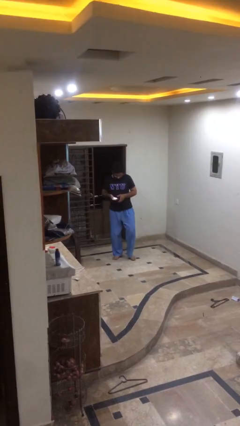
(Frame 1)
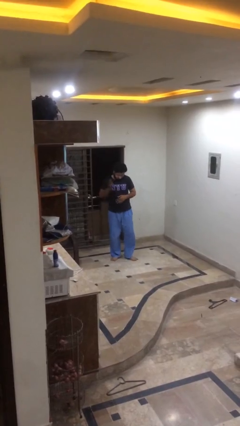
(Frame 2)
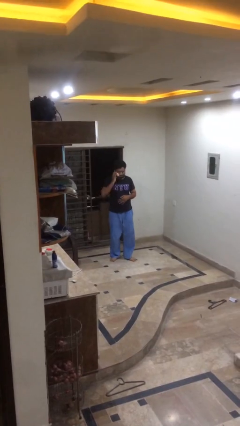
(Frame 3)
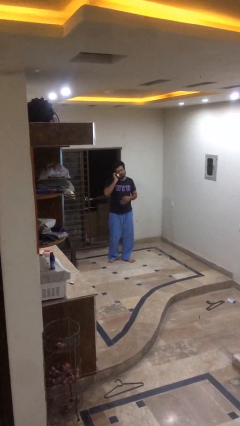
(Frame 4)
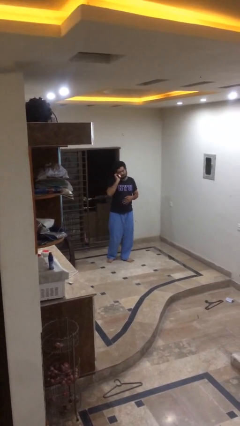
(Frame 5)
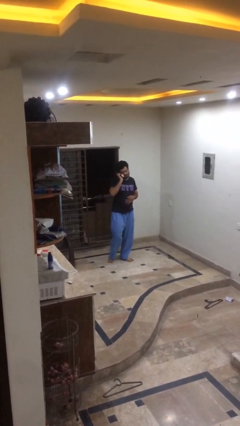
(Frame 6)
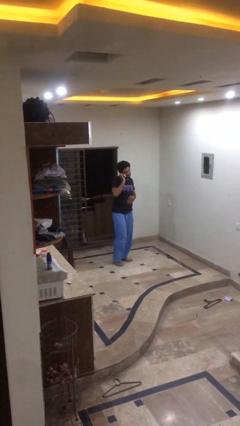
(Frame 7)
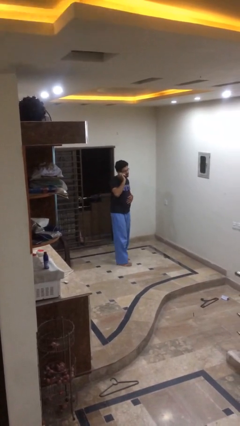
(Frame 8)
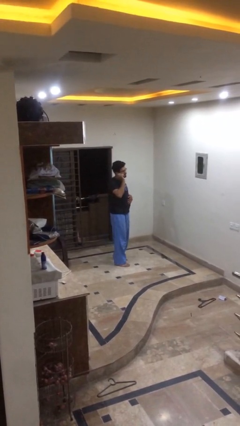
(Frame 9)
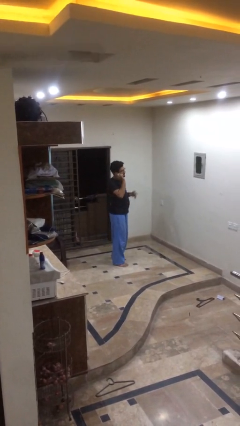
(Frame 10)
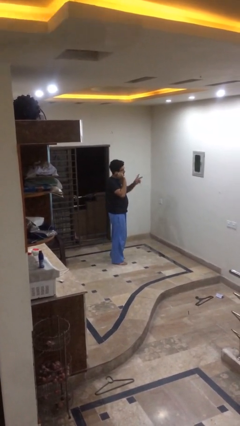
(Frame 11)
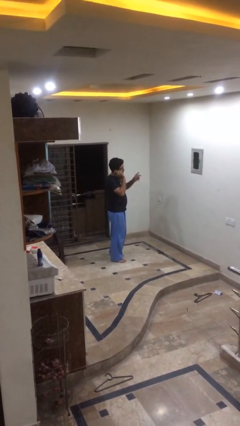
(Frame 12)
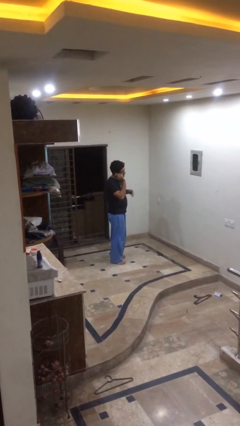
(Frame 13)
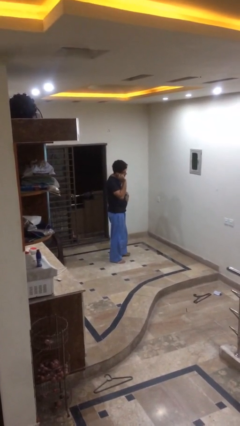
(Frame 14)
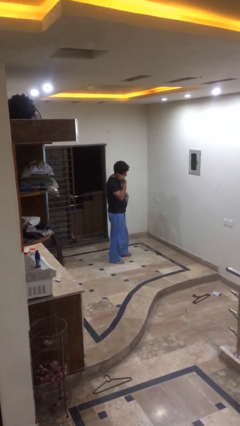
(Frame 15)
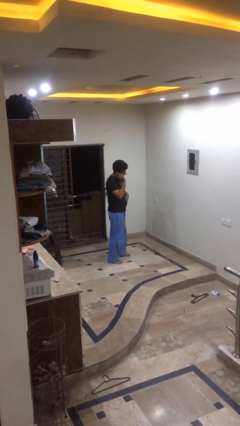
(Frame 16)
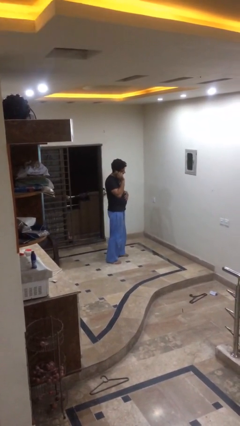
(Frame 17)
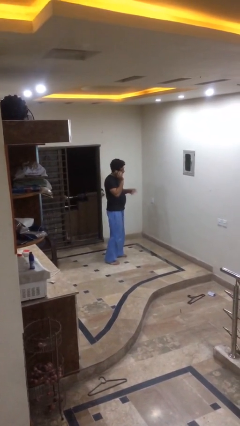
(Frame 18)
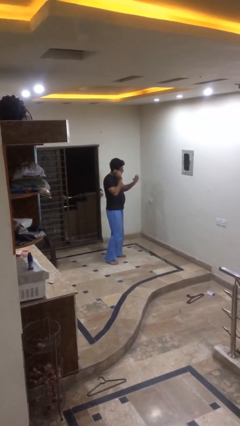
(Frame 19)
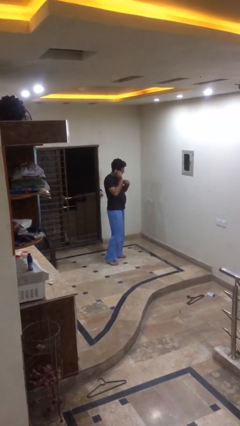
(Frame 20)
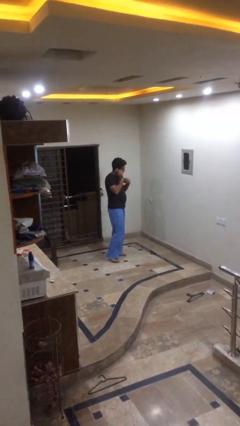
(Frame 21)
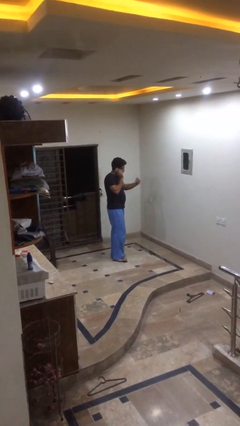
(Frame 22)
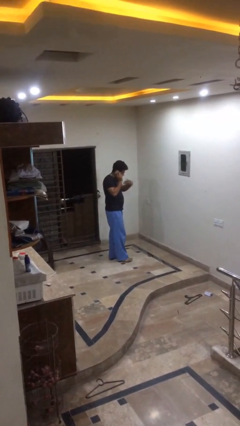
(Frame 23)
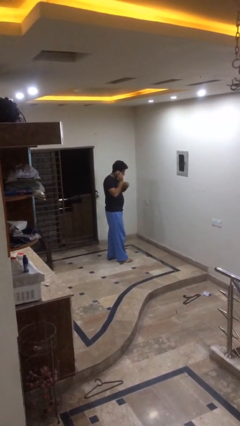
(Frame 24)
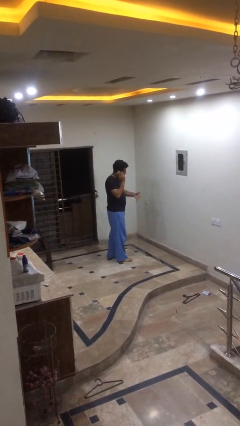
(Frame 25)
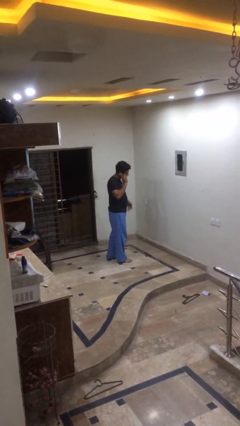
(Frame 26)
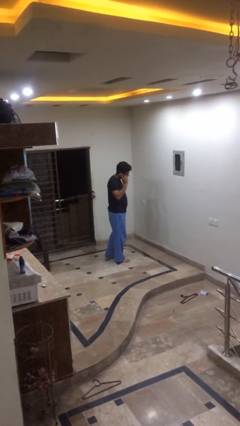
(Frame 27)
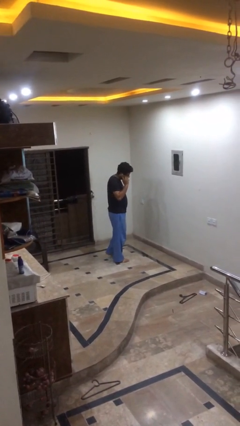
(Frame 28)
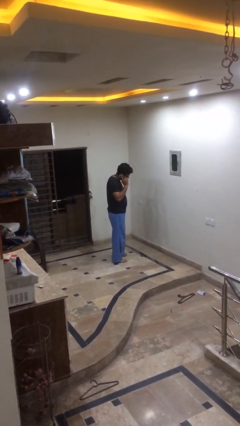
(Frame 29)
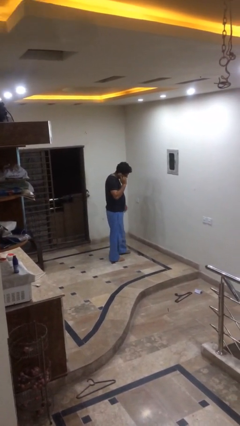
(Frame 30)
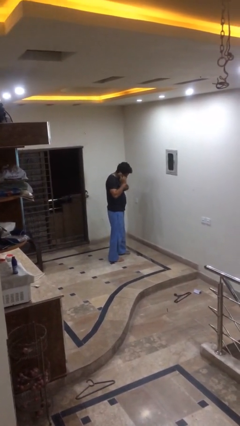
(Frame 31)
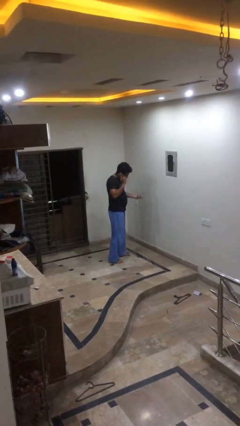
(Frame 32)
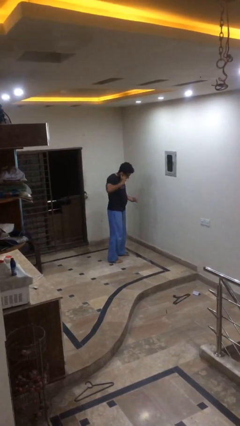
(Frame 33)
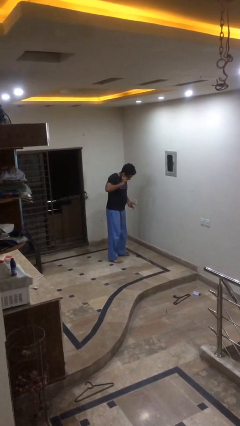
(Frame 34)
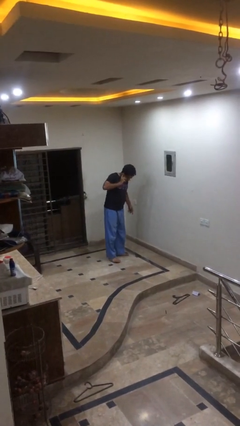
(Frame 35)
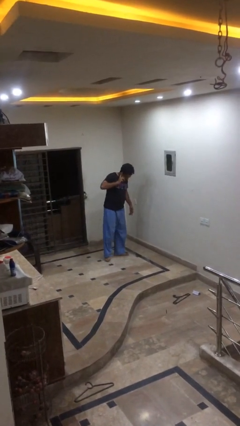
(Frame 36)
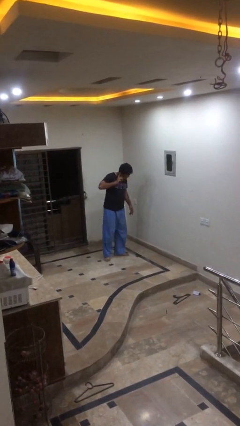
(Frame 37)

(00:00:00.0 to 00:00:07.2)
person talks on phone

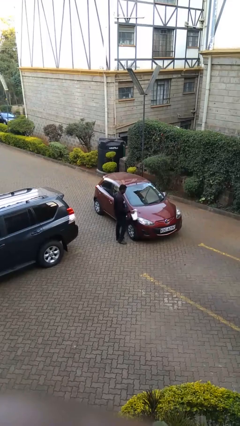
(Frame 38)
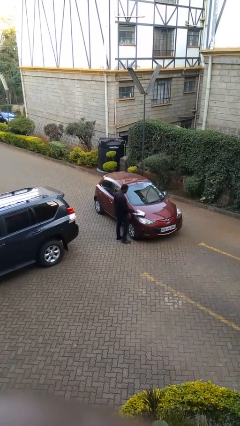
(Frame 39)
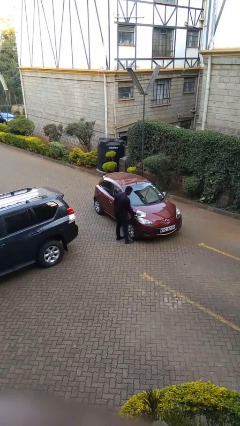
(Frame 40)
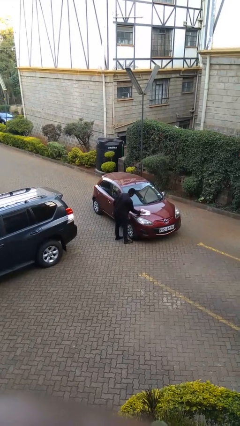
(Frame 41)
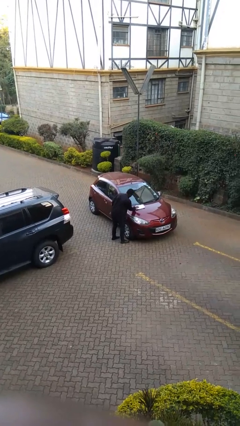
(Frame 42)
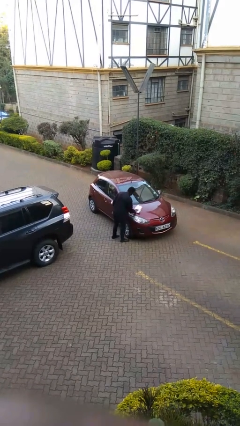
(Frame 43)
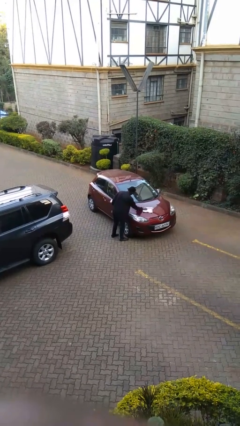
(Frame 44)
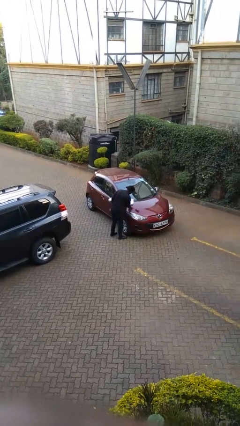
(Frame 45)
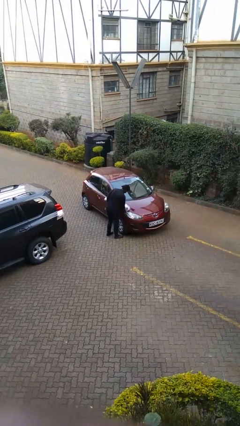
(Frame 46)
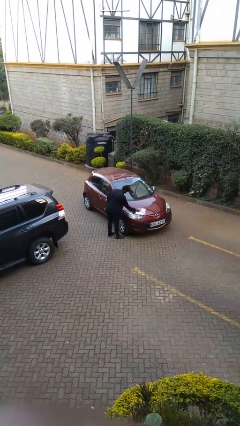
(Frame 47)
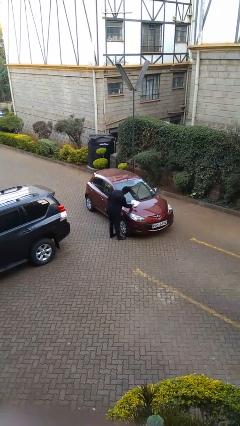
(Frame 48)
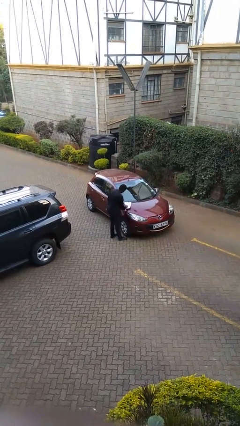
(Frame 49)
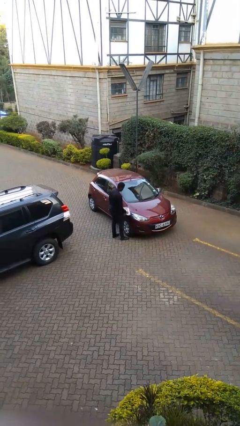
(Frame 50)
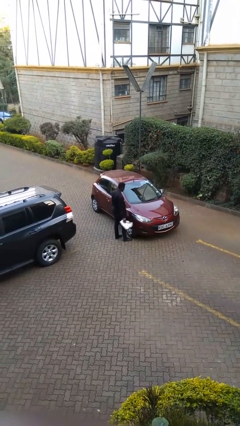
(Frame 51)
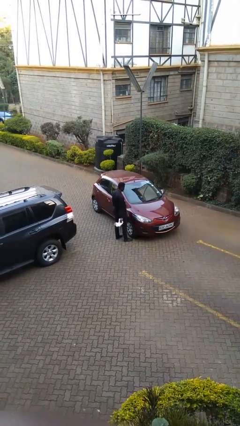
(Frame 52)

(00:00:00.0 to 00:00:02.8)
person polishes car with rag

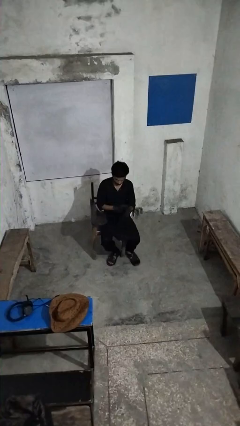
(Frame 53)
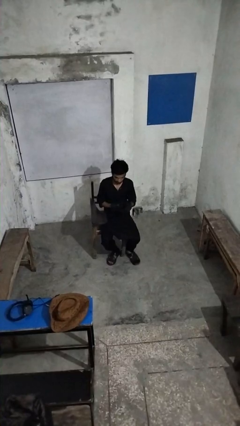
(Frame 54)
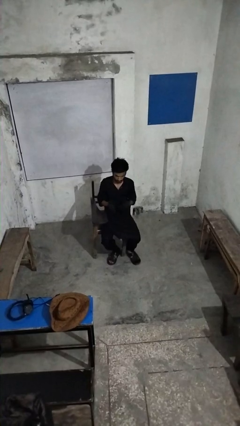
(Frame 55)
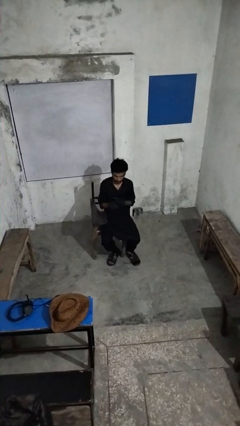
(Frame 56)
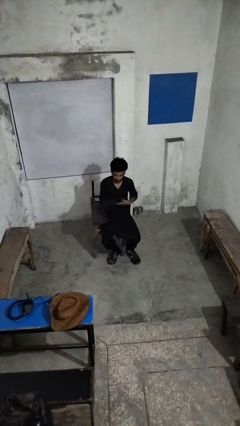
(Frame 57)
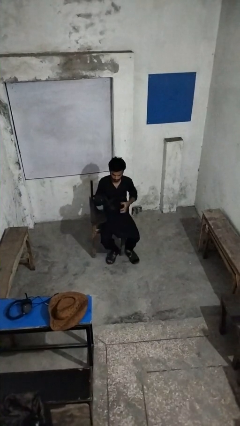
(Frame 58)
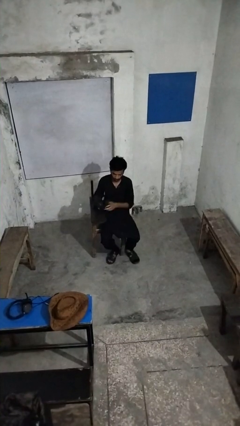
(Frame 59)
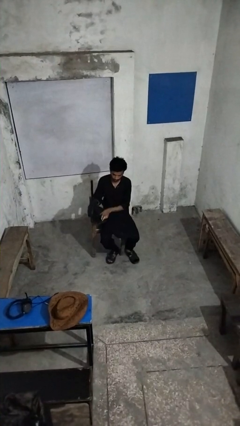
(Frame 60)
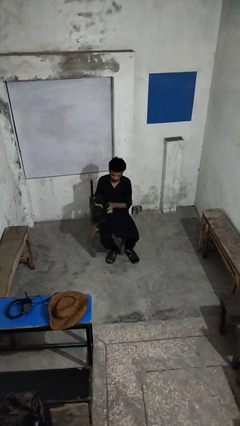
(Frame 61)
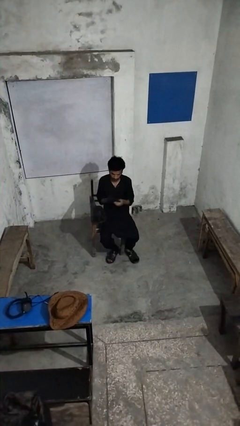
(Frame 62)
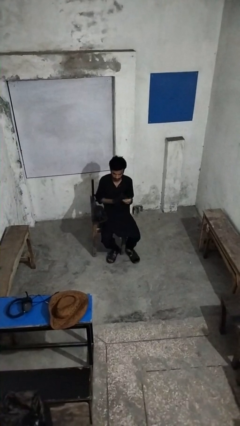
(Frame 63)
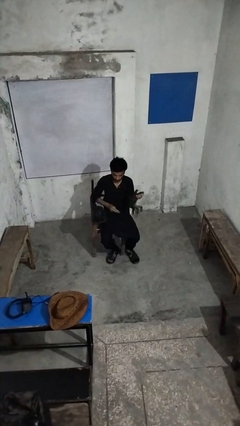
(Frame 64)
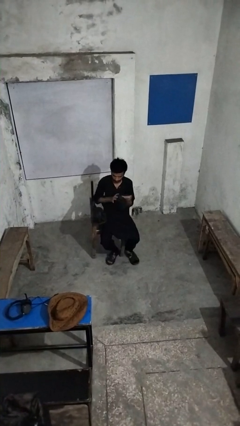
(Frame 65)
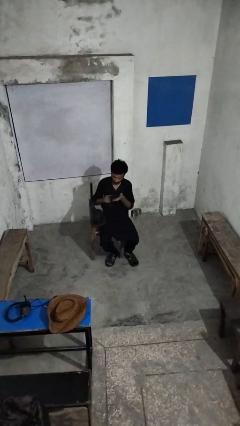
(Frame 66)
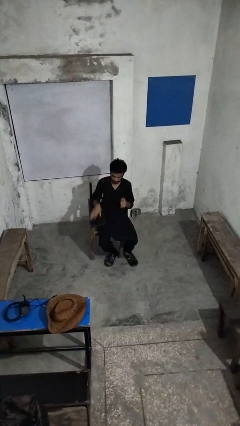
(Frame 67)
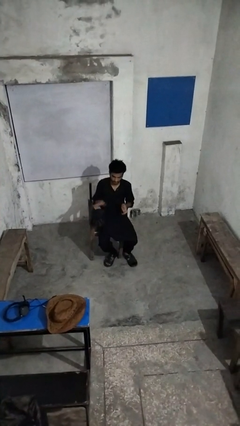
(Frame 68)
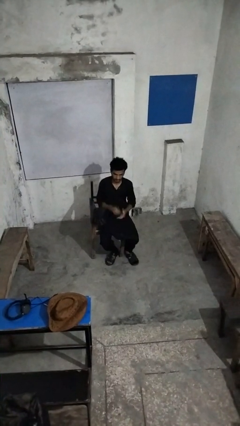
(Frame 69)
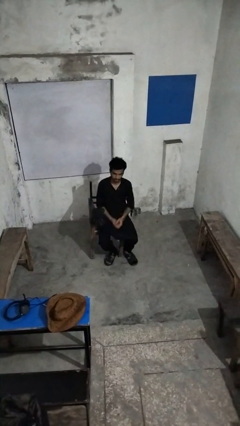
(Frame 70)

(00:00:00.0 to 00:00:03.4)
person takes off gloves

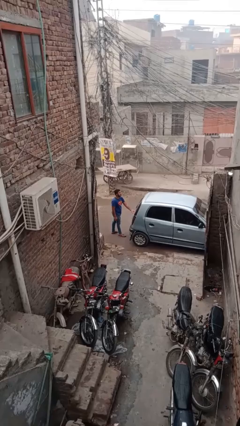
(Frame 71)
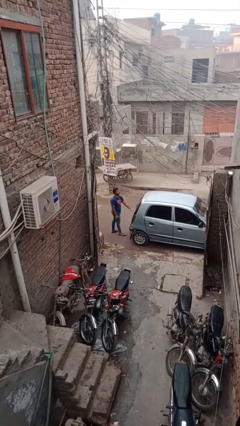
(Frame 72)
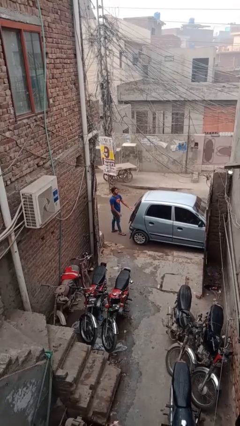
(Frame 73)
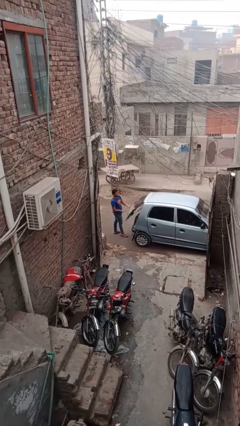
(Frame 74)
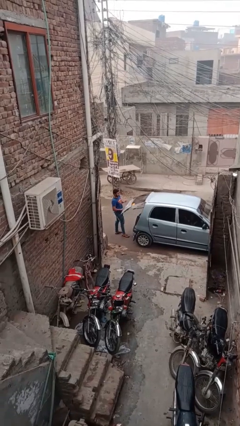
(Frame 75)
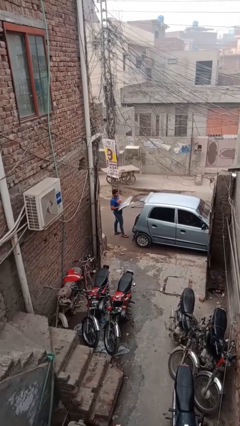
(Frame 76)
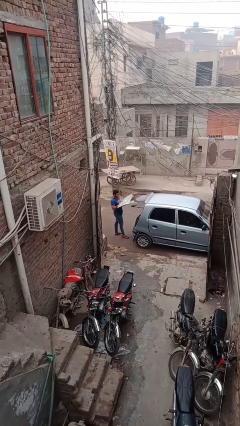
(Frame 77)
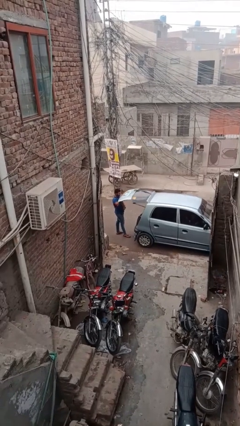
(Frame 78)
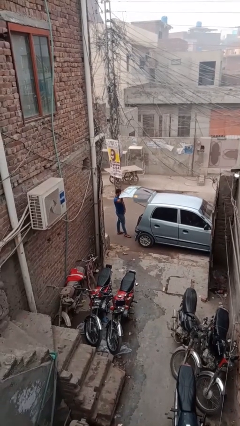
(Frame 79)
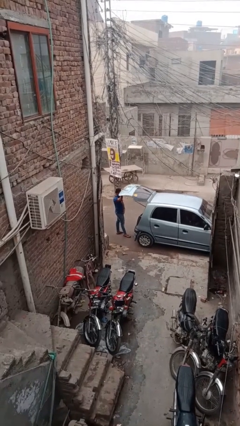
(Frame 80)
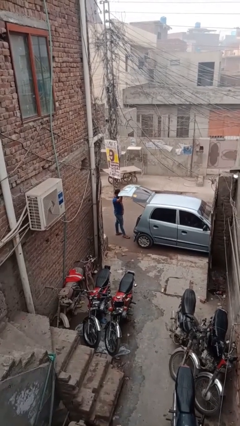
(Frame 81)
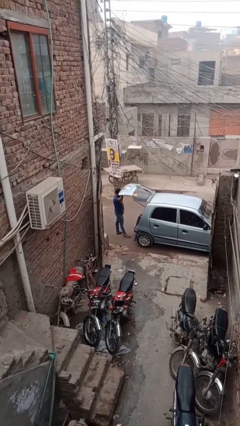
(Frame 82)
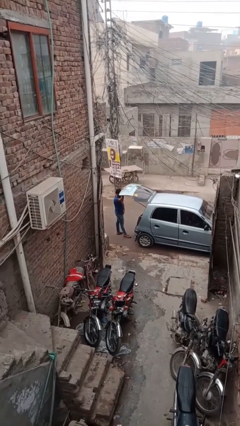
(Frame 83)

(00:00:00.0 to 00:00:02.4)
person opens car trunk

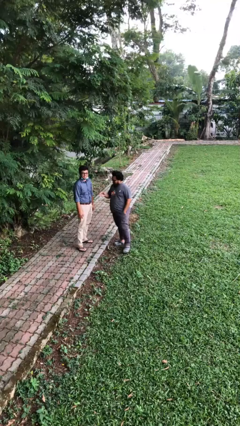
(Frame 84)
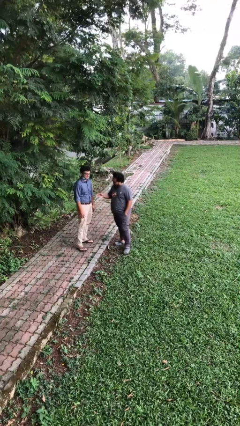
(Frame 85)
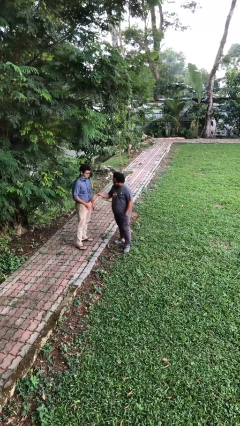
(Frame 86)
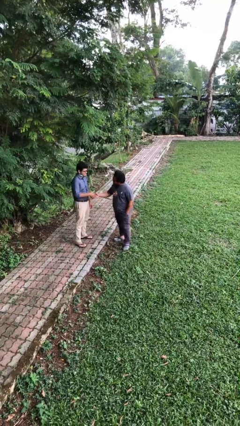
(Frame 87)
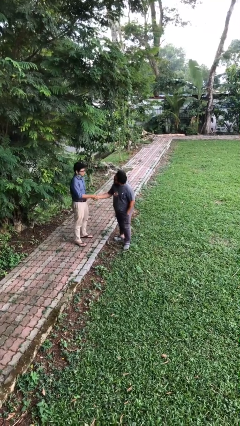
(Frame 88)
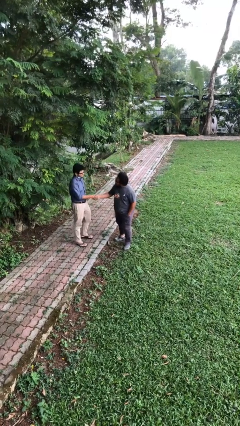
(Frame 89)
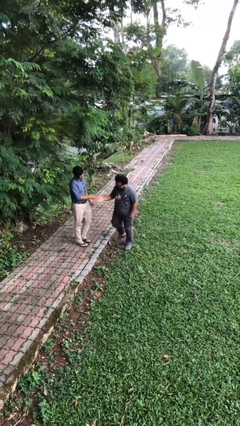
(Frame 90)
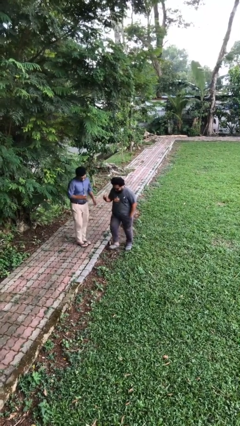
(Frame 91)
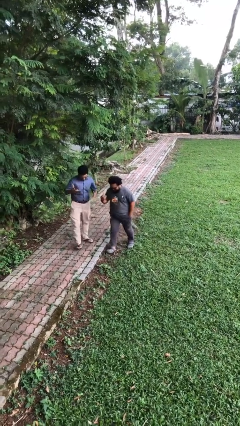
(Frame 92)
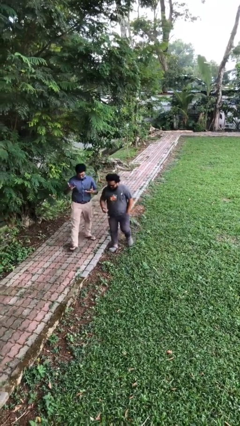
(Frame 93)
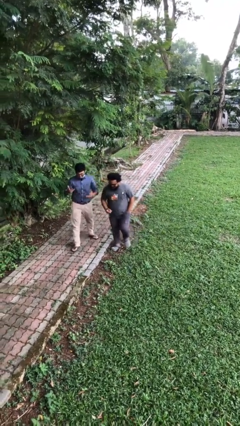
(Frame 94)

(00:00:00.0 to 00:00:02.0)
person shakes hand
